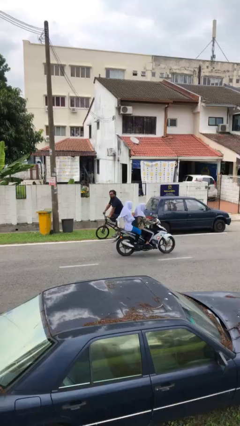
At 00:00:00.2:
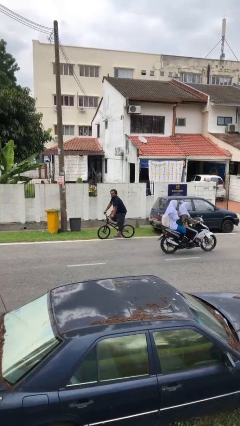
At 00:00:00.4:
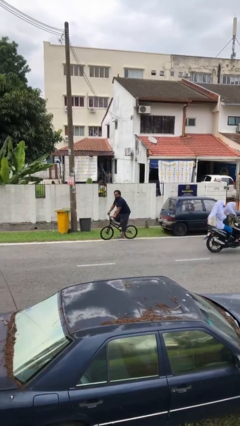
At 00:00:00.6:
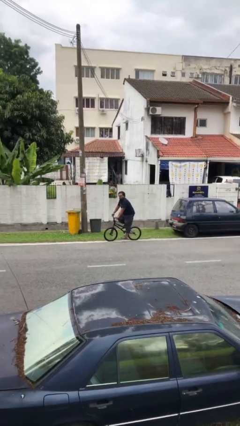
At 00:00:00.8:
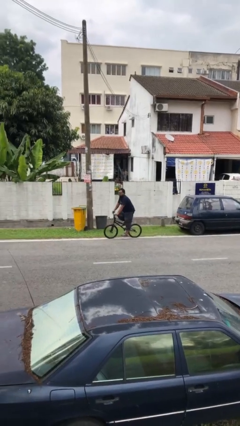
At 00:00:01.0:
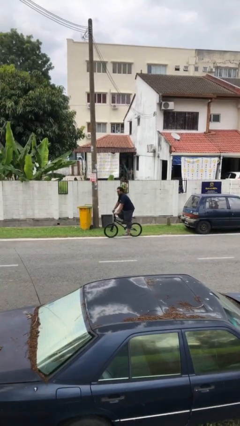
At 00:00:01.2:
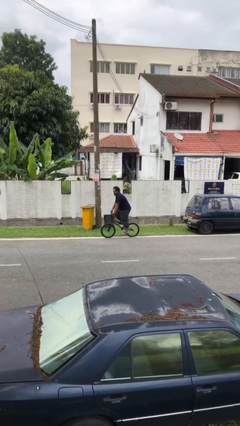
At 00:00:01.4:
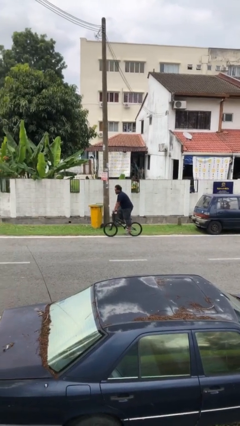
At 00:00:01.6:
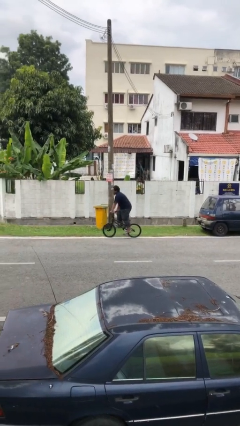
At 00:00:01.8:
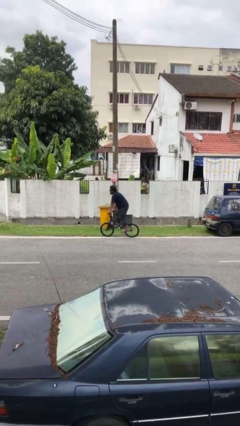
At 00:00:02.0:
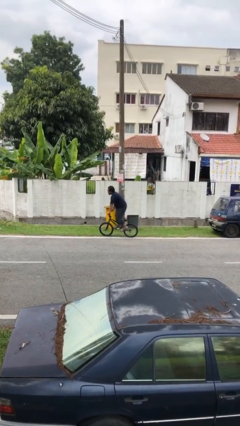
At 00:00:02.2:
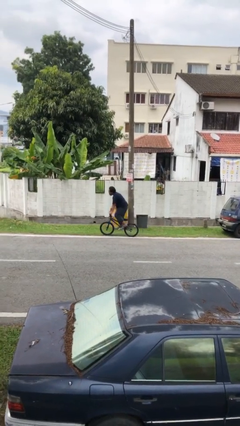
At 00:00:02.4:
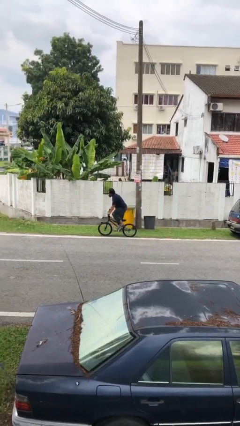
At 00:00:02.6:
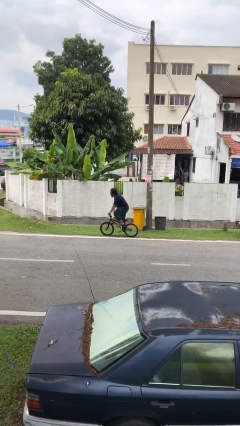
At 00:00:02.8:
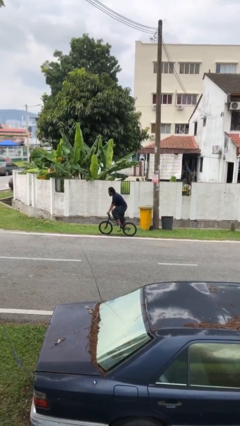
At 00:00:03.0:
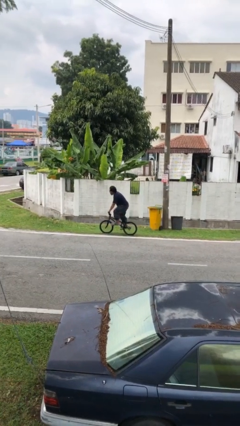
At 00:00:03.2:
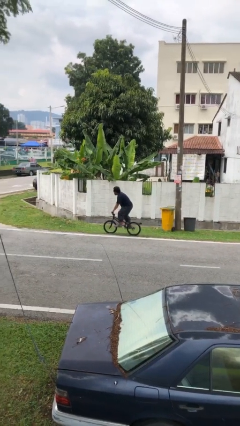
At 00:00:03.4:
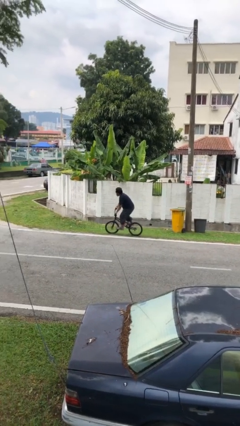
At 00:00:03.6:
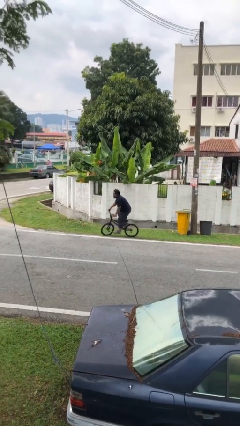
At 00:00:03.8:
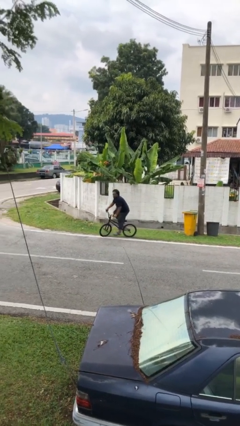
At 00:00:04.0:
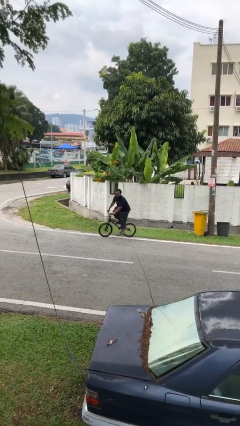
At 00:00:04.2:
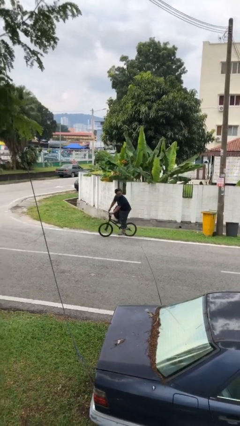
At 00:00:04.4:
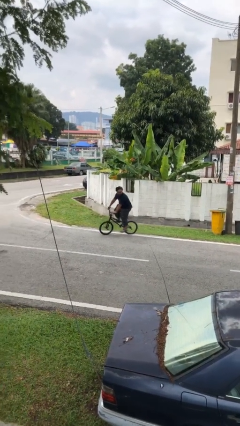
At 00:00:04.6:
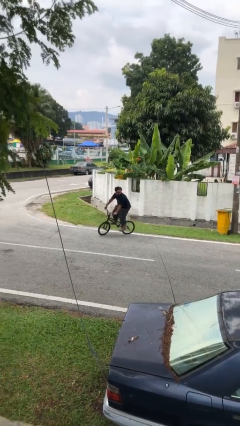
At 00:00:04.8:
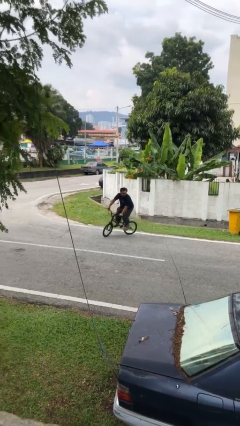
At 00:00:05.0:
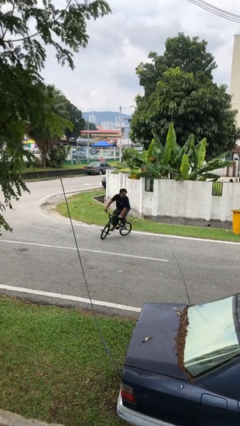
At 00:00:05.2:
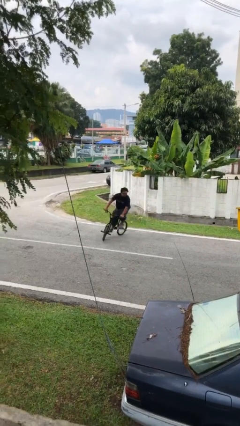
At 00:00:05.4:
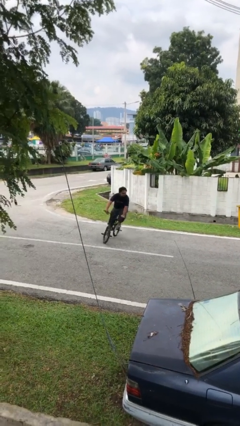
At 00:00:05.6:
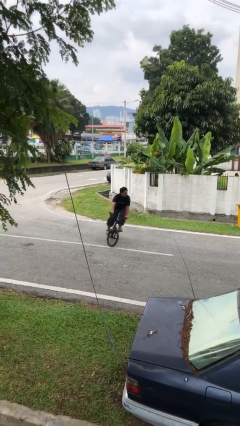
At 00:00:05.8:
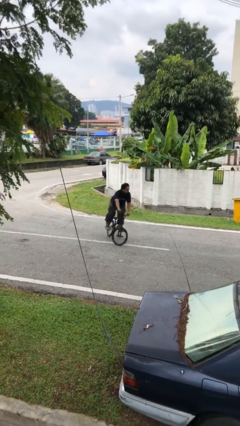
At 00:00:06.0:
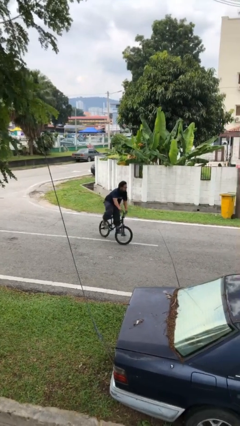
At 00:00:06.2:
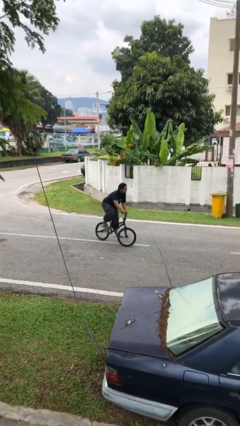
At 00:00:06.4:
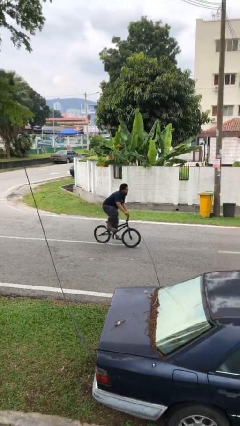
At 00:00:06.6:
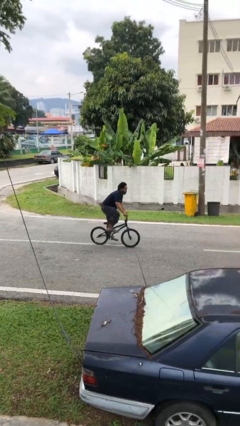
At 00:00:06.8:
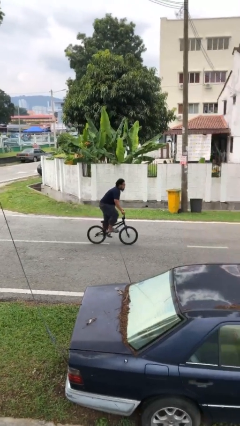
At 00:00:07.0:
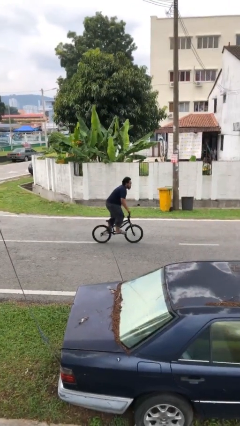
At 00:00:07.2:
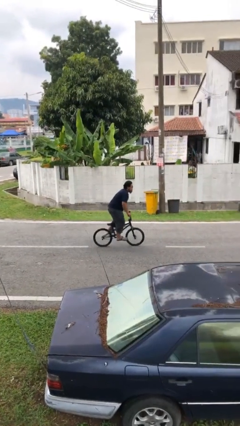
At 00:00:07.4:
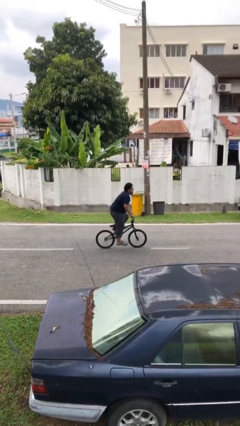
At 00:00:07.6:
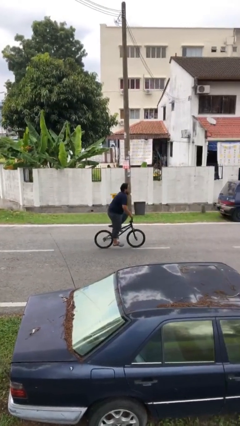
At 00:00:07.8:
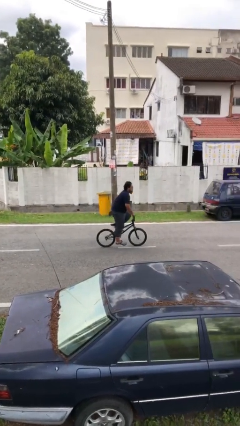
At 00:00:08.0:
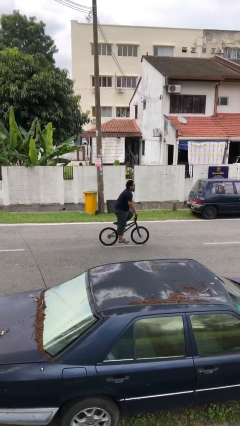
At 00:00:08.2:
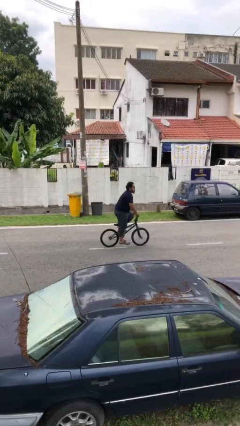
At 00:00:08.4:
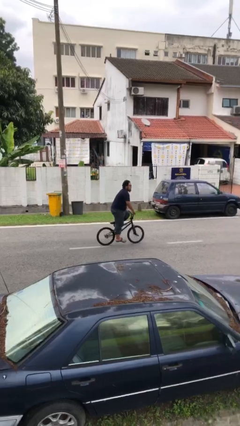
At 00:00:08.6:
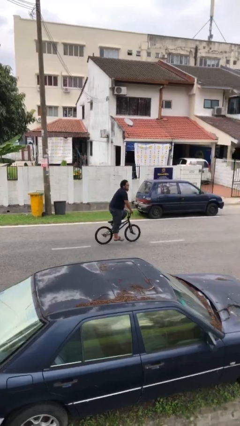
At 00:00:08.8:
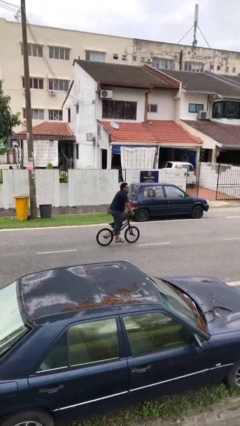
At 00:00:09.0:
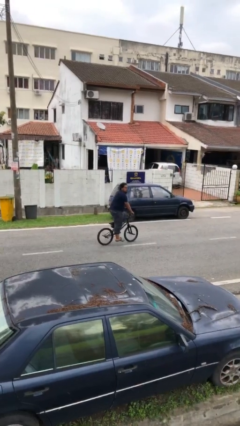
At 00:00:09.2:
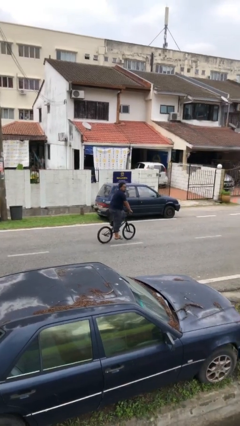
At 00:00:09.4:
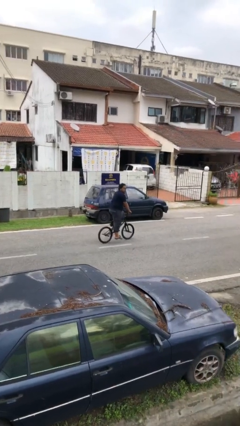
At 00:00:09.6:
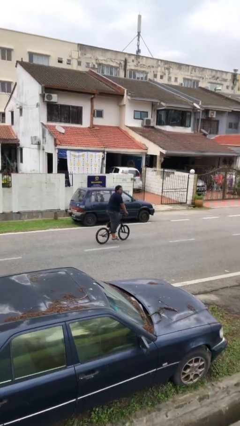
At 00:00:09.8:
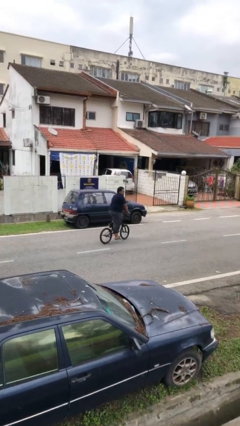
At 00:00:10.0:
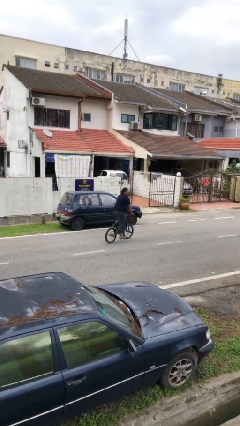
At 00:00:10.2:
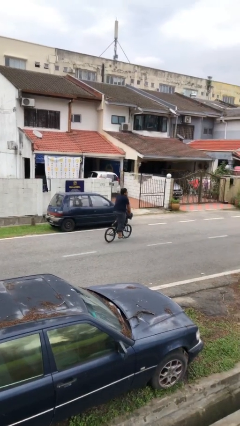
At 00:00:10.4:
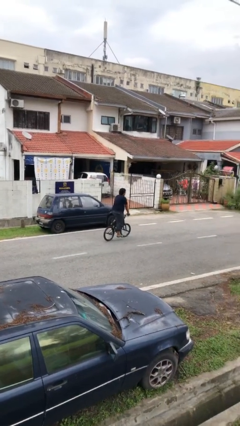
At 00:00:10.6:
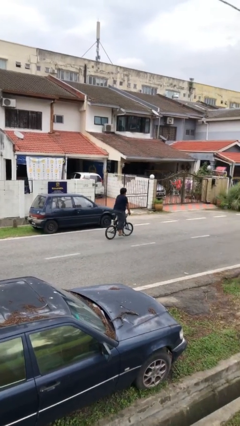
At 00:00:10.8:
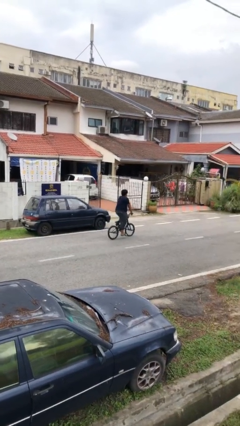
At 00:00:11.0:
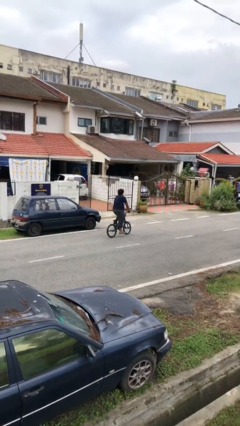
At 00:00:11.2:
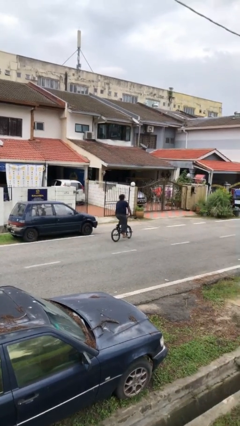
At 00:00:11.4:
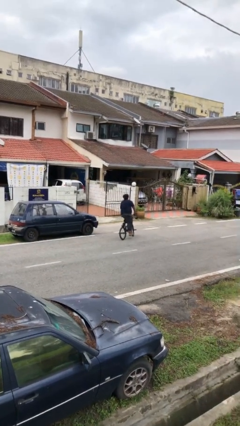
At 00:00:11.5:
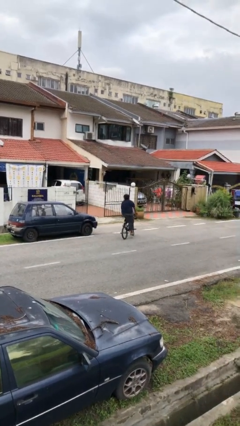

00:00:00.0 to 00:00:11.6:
person rides bicycle

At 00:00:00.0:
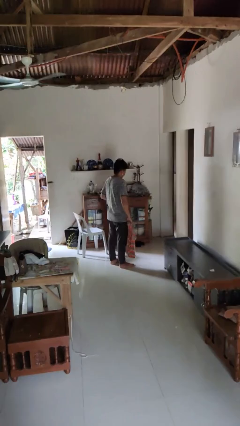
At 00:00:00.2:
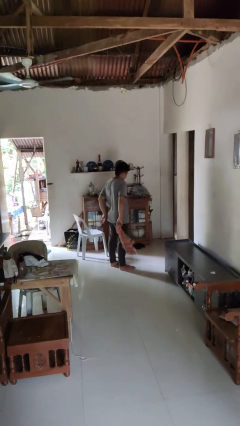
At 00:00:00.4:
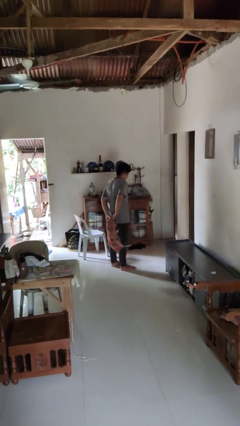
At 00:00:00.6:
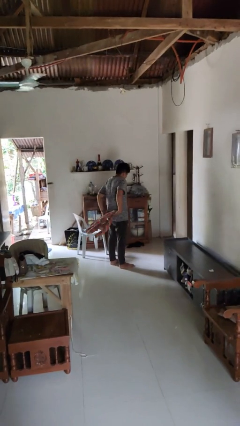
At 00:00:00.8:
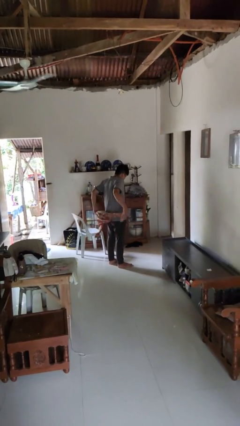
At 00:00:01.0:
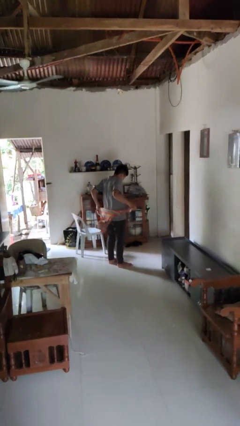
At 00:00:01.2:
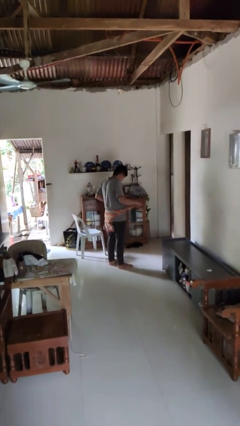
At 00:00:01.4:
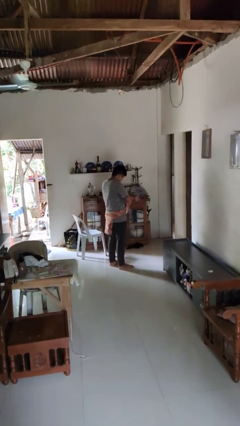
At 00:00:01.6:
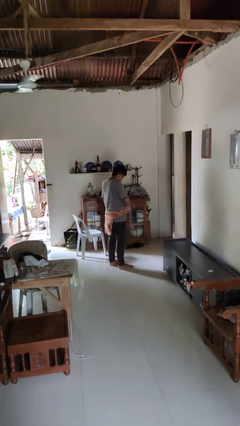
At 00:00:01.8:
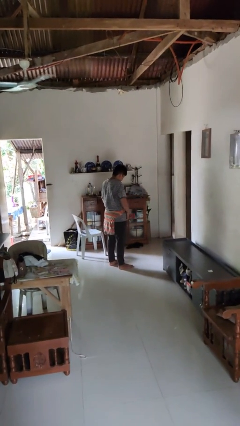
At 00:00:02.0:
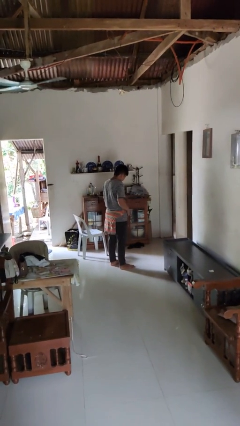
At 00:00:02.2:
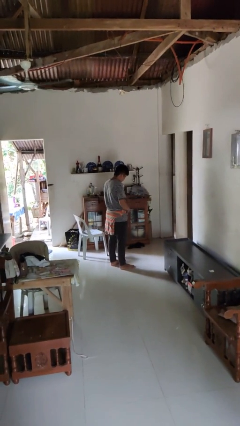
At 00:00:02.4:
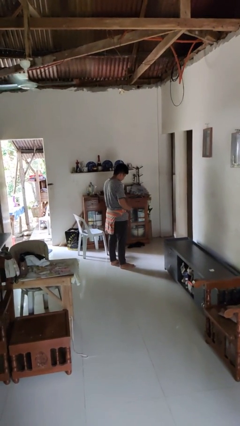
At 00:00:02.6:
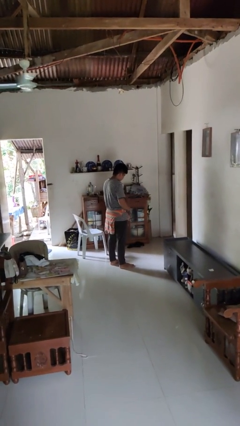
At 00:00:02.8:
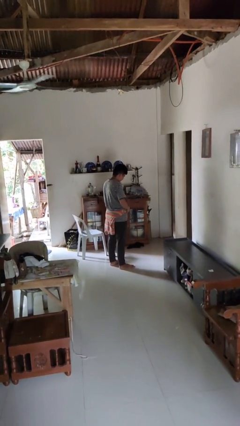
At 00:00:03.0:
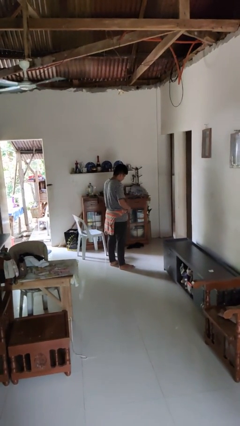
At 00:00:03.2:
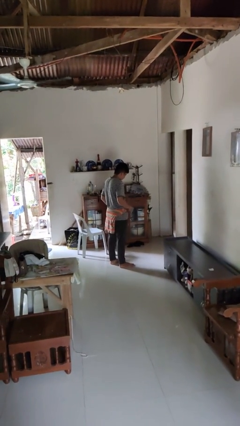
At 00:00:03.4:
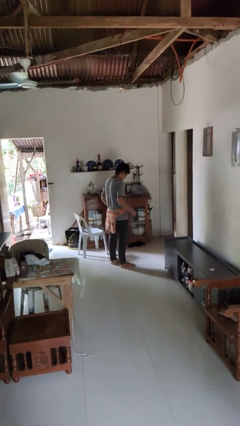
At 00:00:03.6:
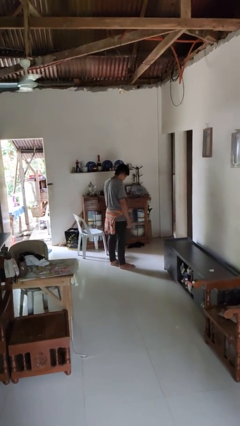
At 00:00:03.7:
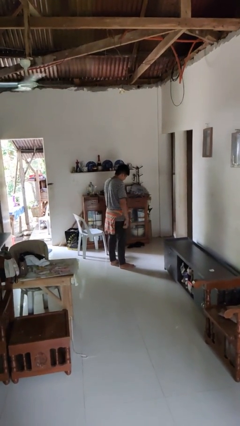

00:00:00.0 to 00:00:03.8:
person ties jacket around waist

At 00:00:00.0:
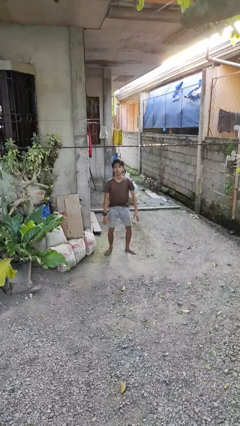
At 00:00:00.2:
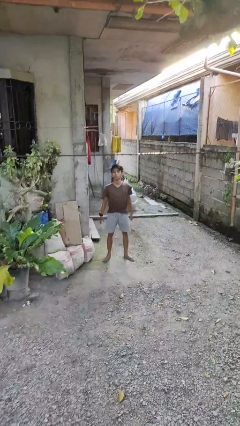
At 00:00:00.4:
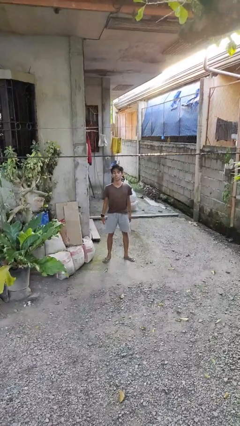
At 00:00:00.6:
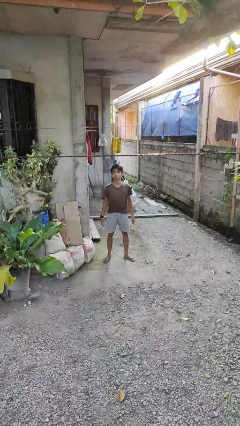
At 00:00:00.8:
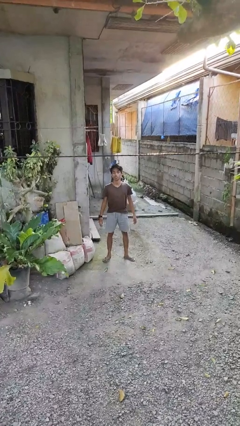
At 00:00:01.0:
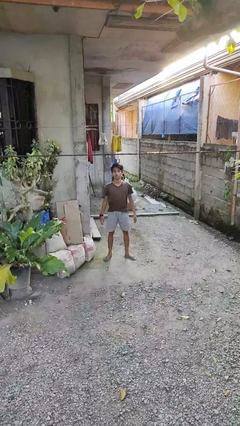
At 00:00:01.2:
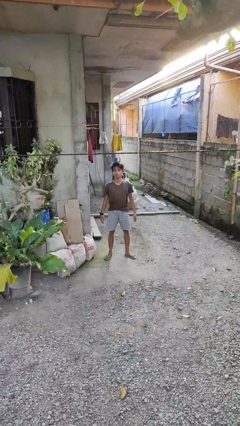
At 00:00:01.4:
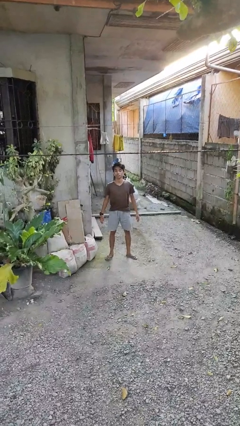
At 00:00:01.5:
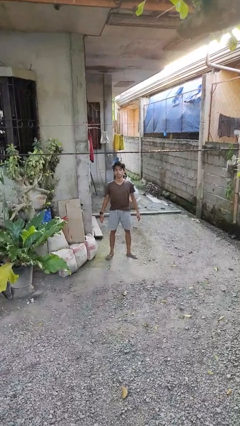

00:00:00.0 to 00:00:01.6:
person stands up

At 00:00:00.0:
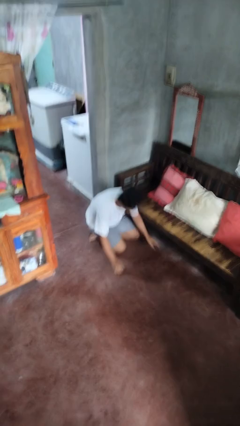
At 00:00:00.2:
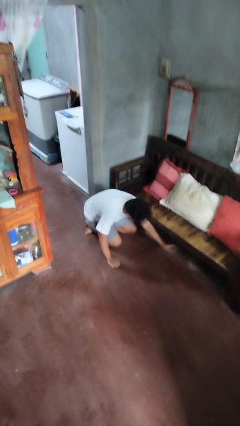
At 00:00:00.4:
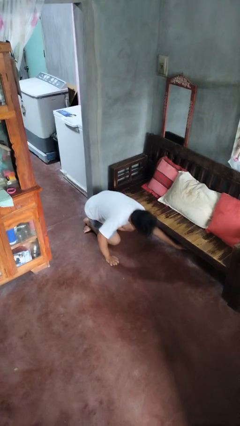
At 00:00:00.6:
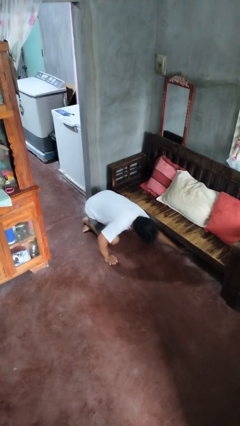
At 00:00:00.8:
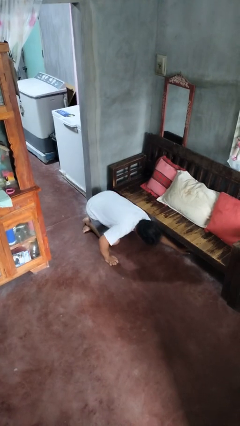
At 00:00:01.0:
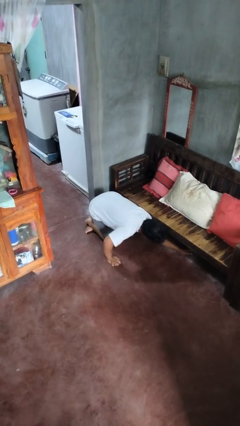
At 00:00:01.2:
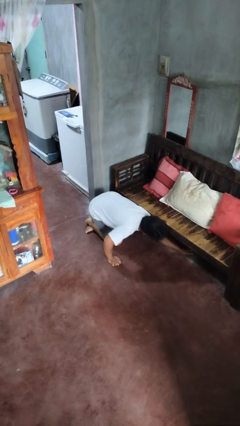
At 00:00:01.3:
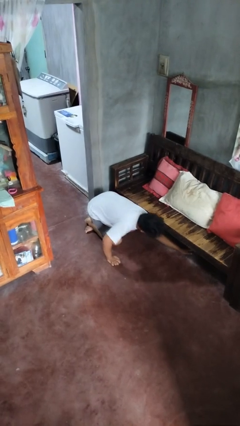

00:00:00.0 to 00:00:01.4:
person searches under couch
